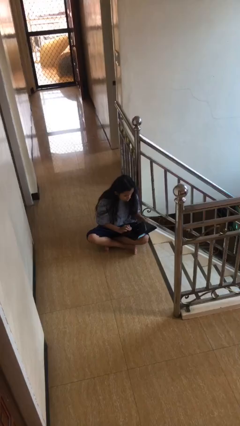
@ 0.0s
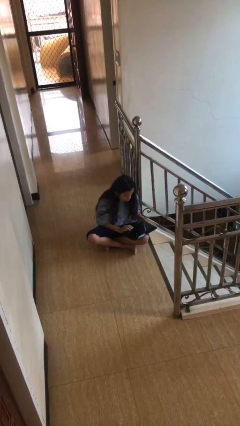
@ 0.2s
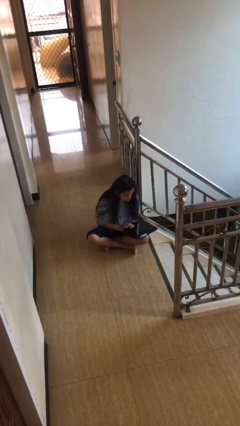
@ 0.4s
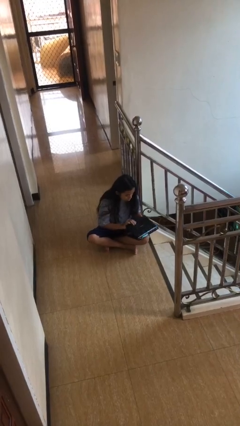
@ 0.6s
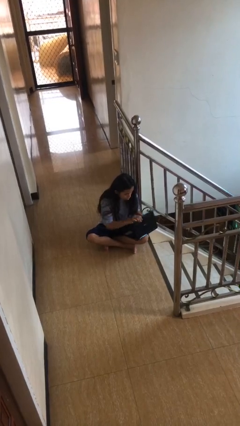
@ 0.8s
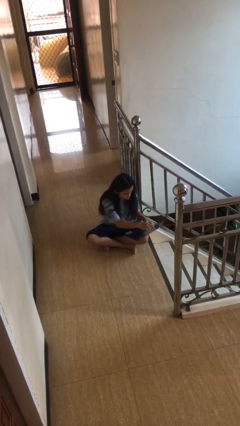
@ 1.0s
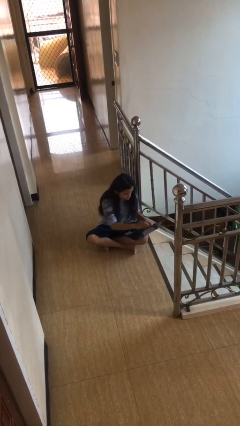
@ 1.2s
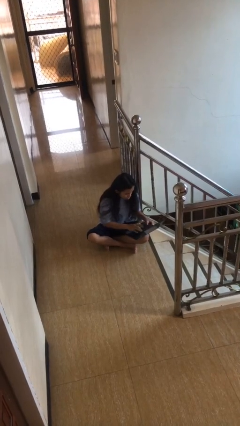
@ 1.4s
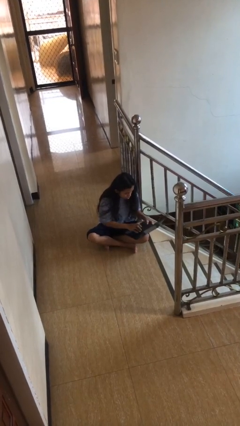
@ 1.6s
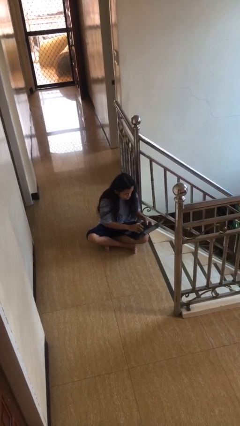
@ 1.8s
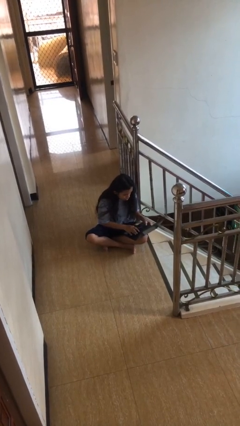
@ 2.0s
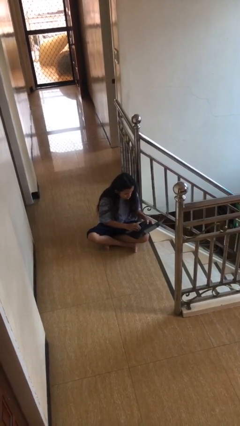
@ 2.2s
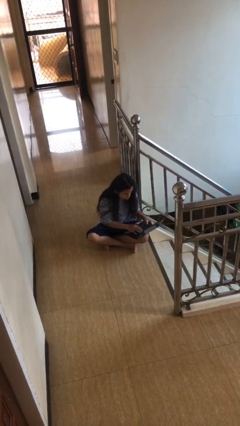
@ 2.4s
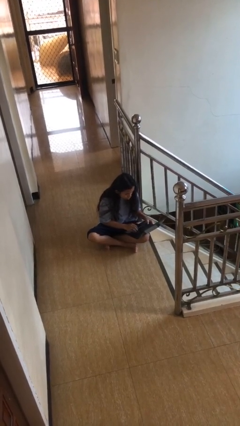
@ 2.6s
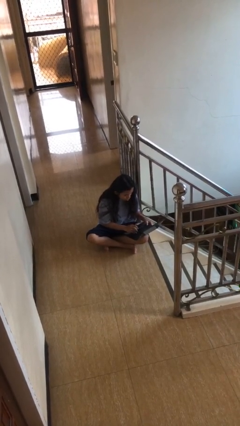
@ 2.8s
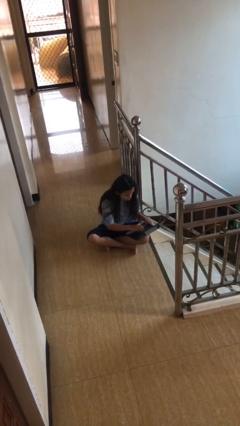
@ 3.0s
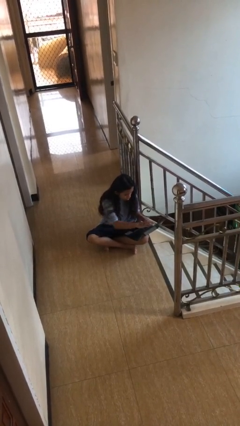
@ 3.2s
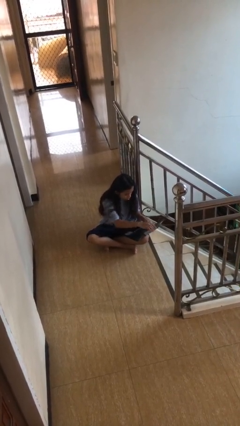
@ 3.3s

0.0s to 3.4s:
person interacts with laptop

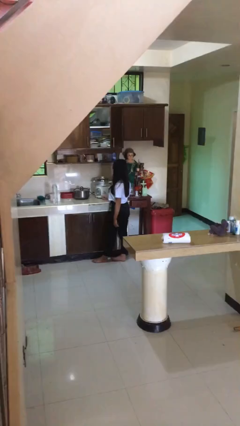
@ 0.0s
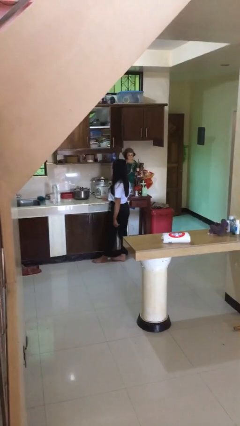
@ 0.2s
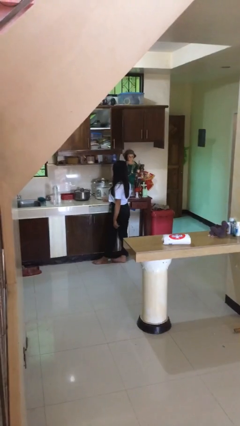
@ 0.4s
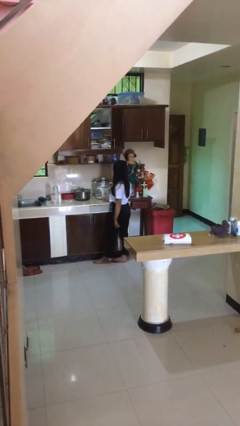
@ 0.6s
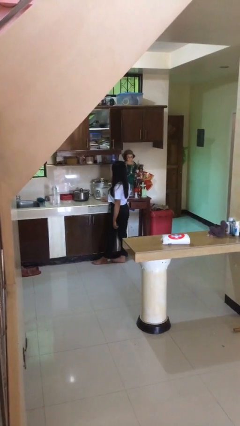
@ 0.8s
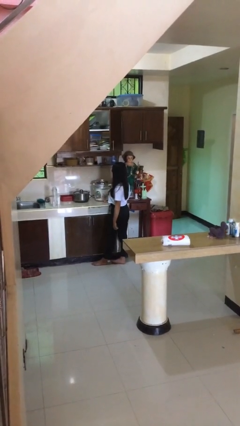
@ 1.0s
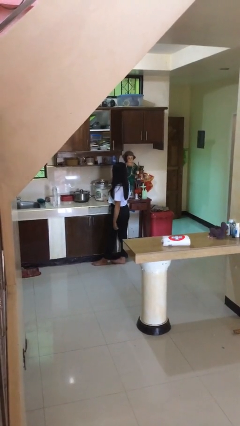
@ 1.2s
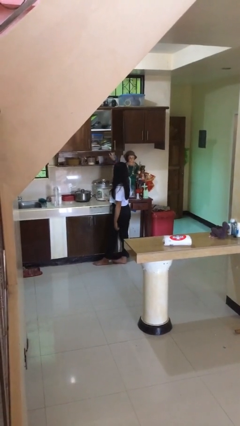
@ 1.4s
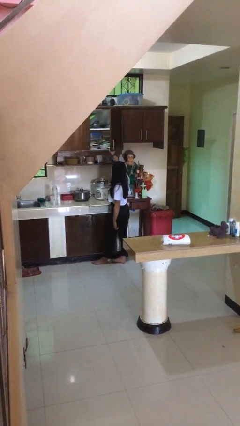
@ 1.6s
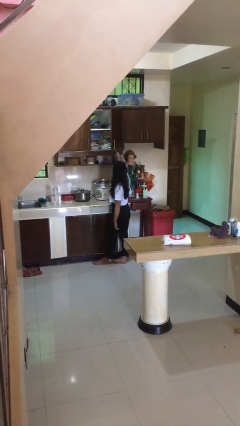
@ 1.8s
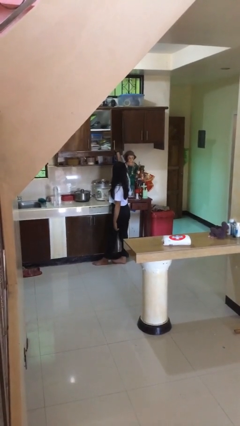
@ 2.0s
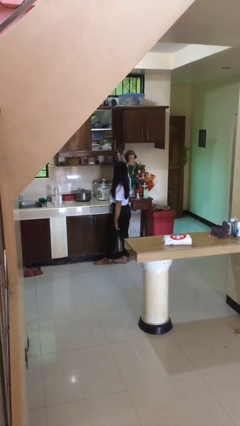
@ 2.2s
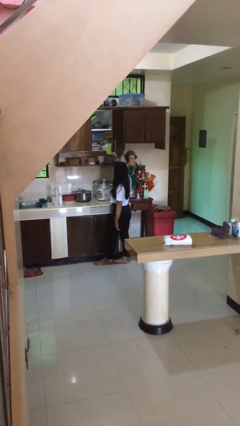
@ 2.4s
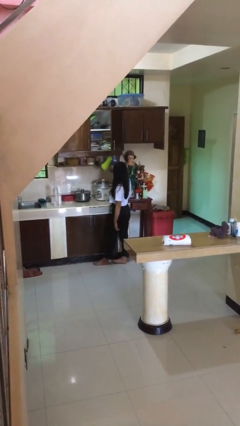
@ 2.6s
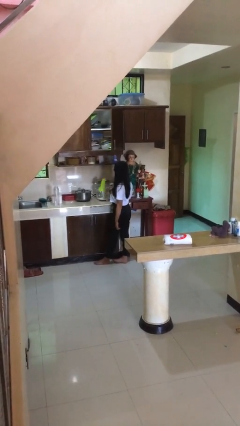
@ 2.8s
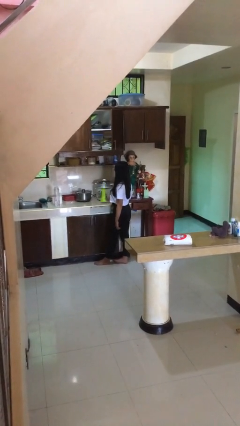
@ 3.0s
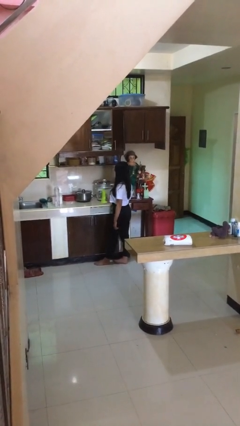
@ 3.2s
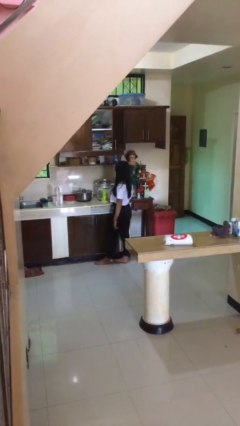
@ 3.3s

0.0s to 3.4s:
person picks up object from cabinet

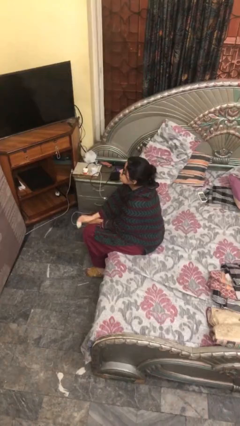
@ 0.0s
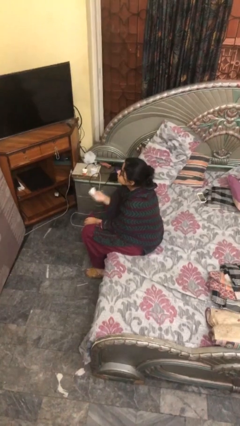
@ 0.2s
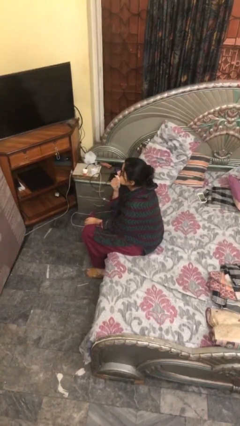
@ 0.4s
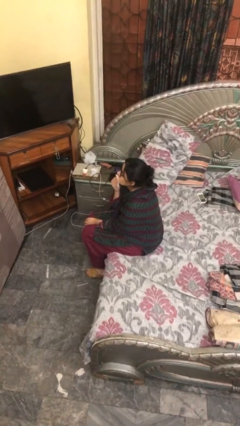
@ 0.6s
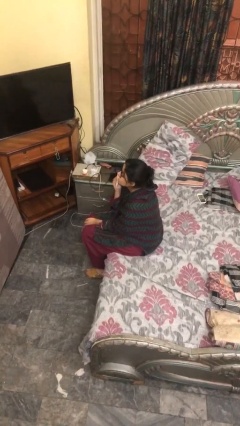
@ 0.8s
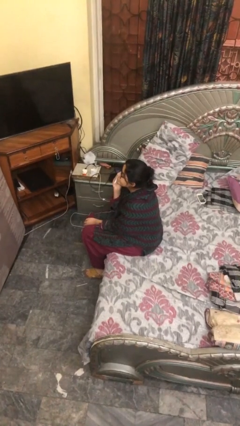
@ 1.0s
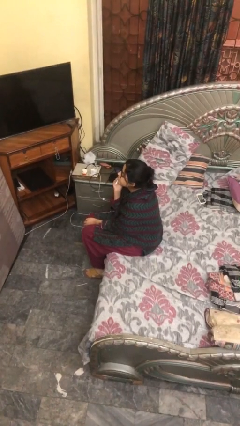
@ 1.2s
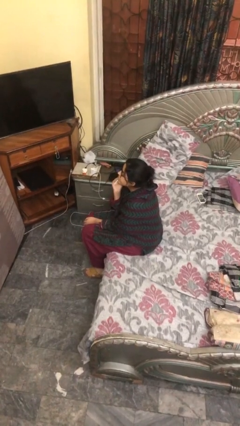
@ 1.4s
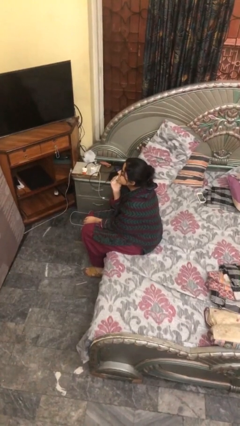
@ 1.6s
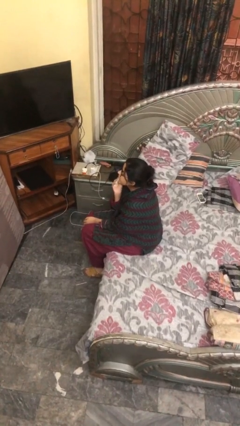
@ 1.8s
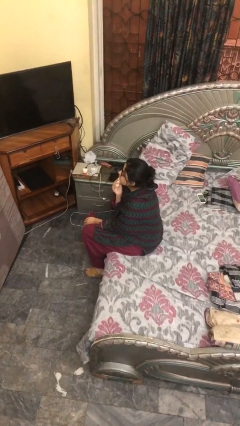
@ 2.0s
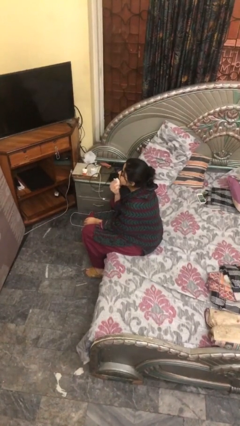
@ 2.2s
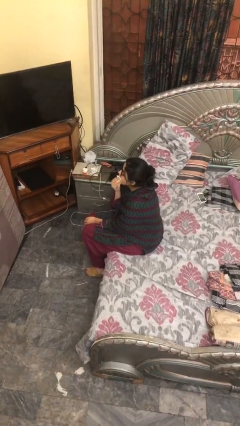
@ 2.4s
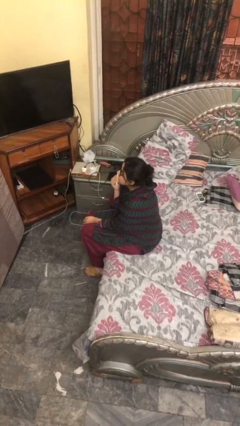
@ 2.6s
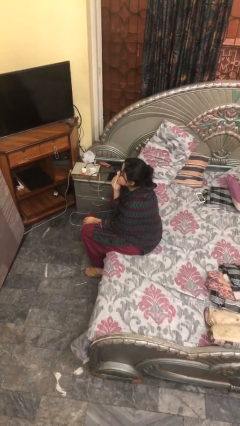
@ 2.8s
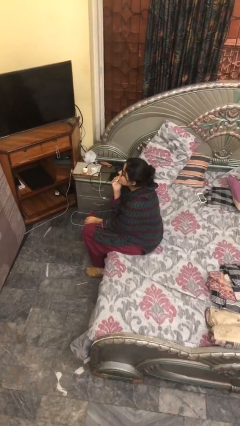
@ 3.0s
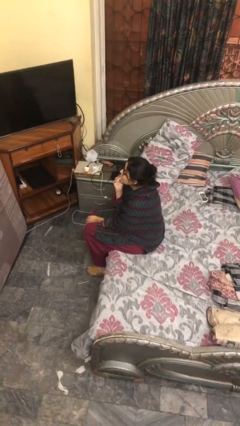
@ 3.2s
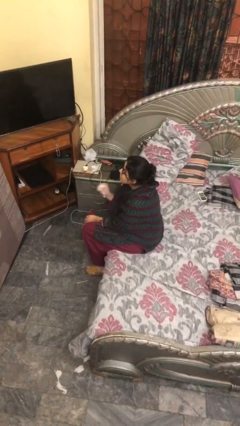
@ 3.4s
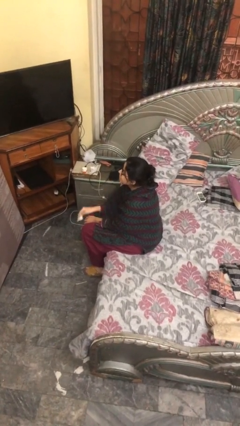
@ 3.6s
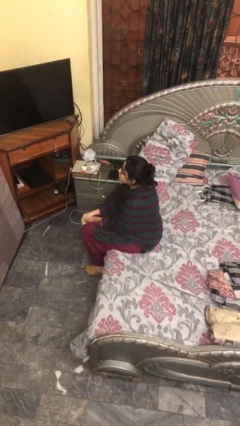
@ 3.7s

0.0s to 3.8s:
person wipes mouth with napkin

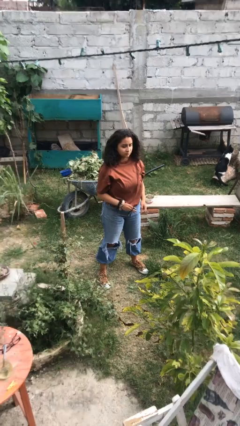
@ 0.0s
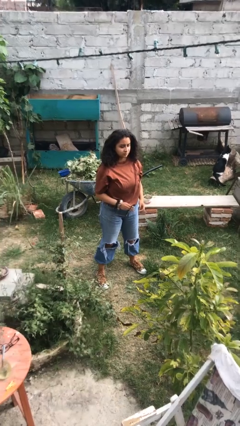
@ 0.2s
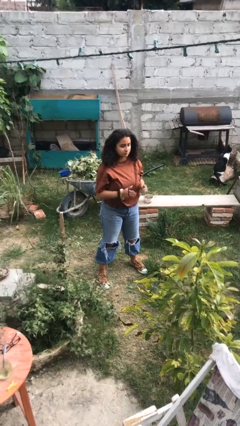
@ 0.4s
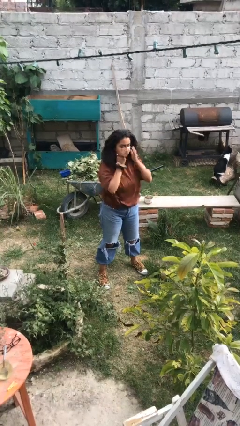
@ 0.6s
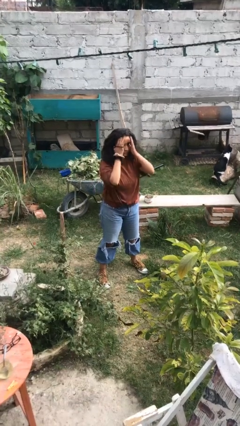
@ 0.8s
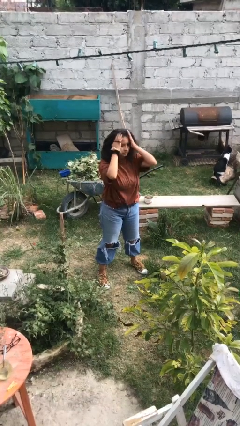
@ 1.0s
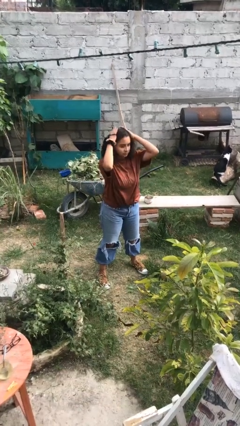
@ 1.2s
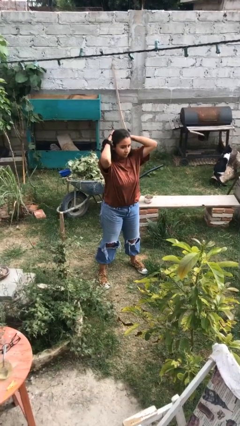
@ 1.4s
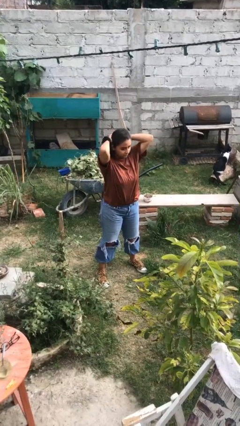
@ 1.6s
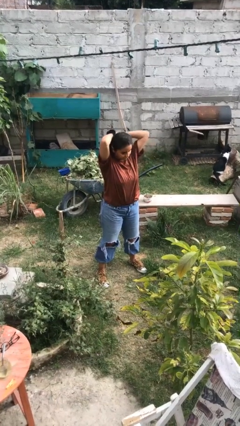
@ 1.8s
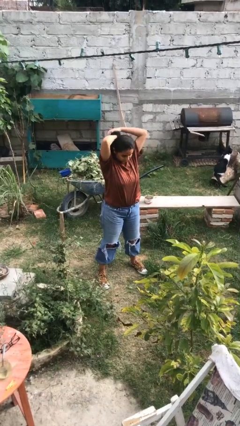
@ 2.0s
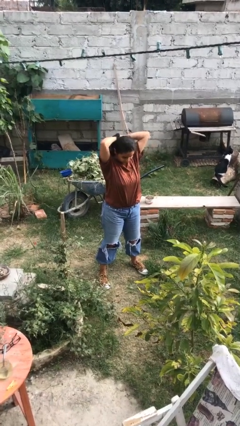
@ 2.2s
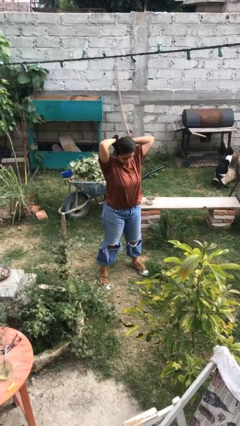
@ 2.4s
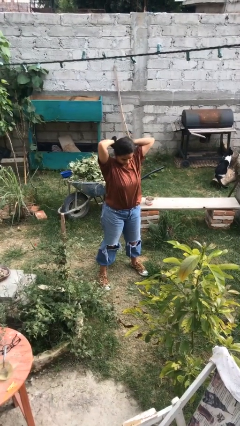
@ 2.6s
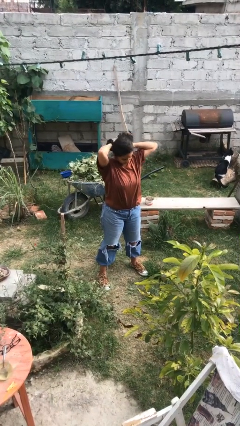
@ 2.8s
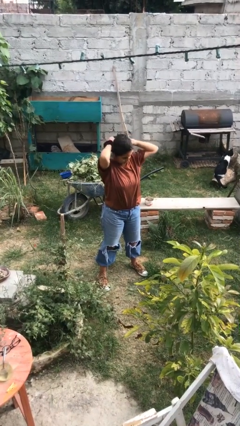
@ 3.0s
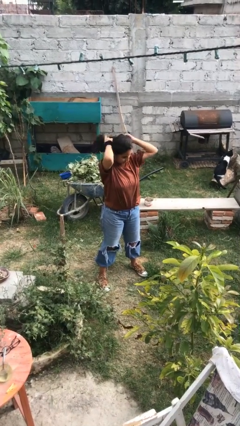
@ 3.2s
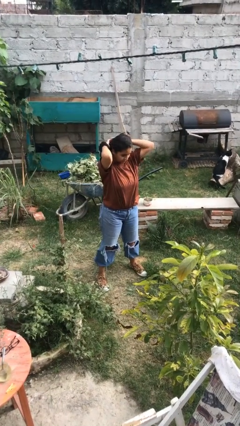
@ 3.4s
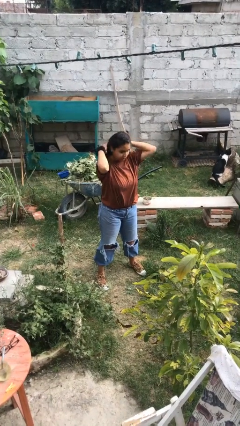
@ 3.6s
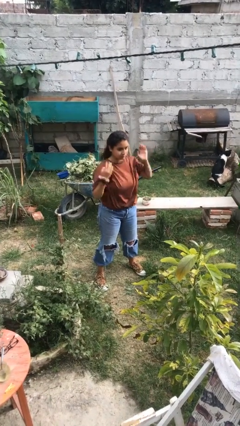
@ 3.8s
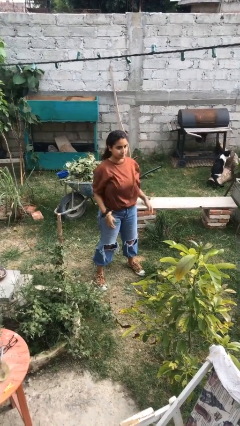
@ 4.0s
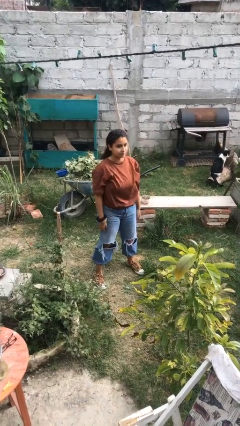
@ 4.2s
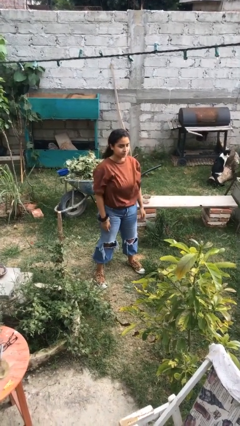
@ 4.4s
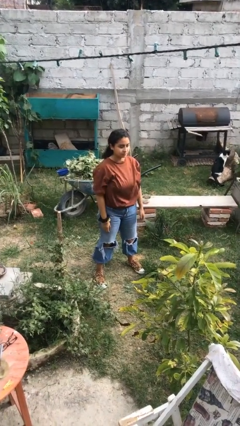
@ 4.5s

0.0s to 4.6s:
person puts hair in ponytail

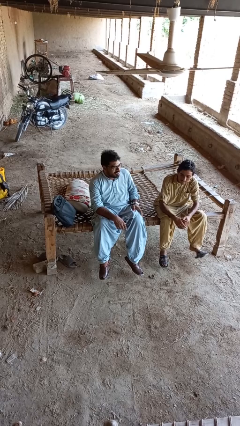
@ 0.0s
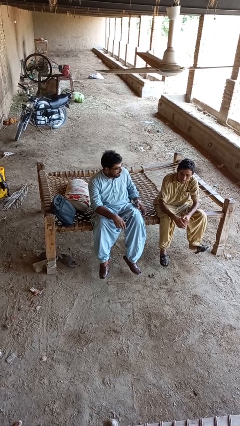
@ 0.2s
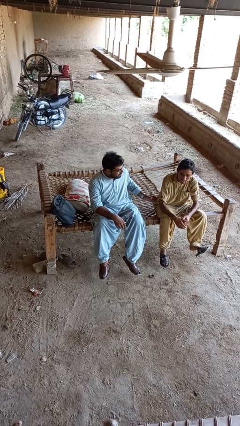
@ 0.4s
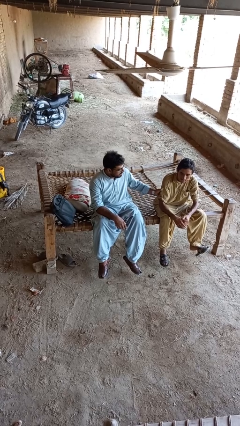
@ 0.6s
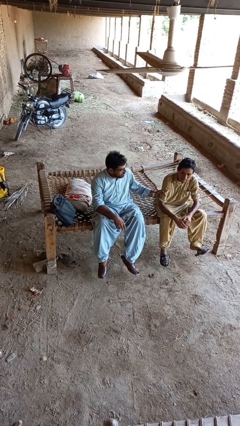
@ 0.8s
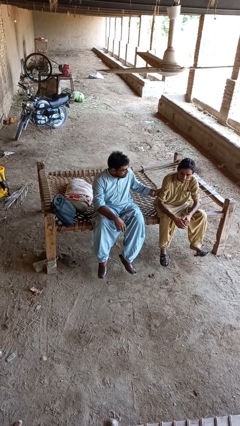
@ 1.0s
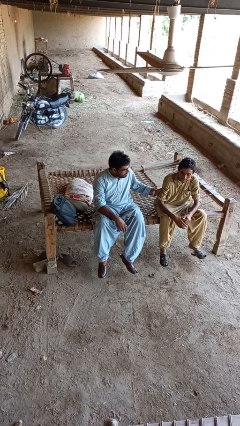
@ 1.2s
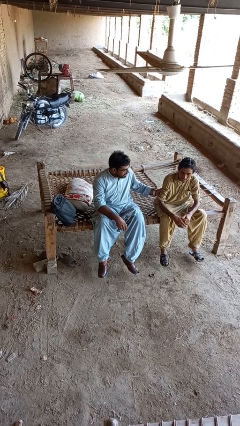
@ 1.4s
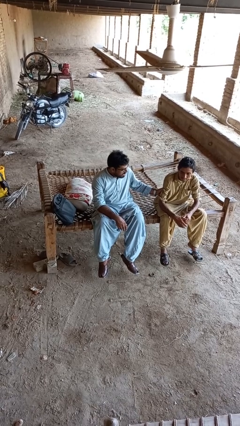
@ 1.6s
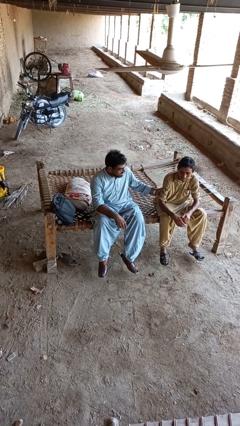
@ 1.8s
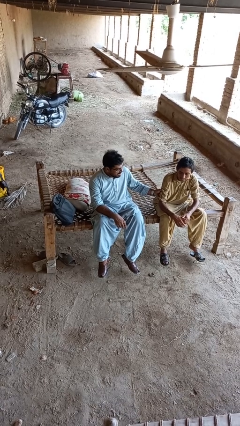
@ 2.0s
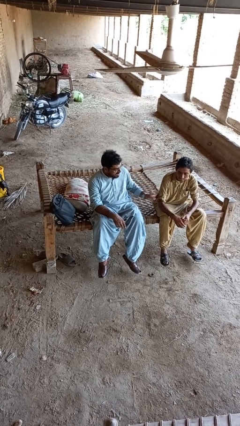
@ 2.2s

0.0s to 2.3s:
person grabs person by bicep

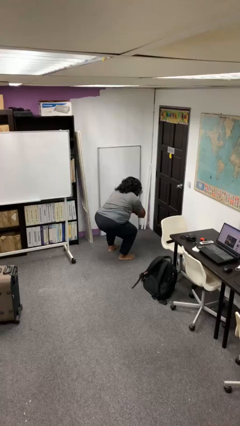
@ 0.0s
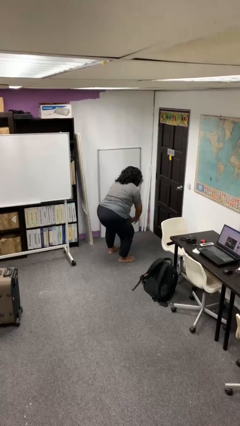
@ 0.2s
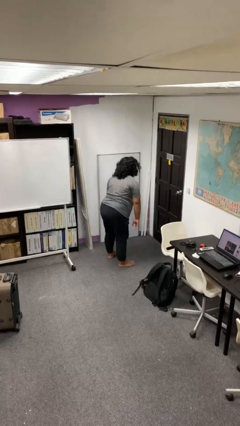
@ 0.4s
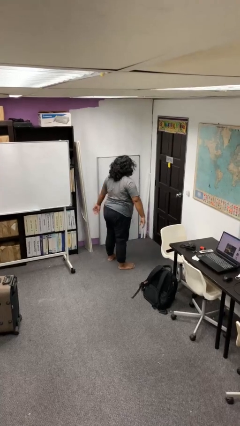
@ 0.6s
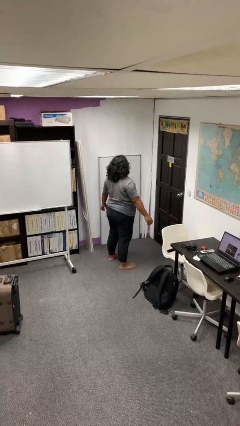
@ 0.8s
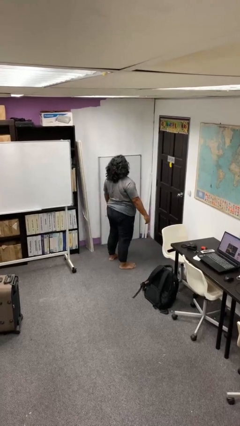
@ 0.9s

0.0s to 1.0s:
person stands up
